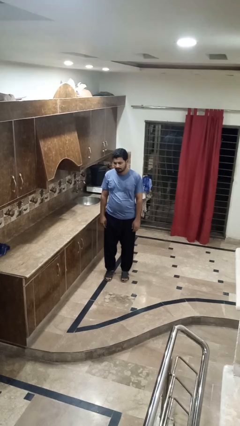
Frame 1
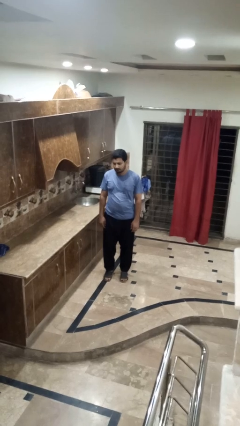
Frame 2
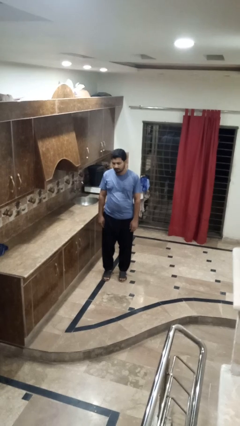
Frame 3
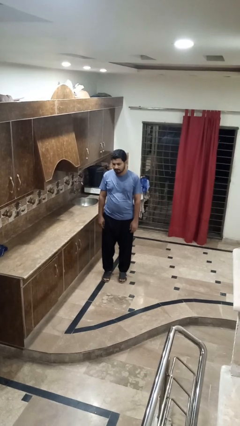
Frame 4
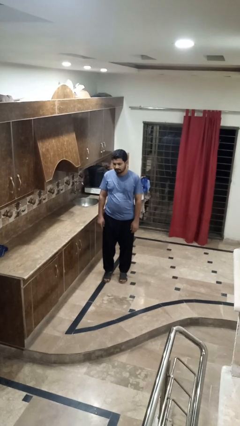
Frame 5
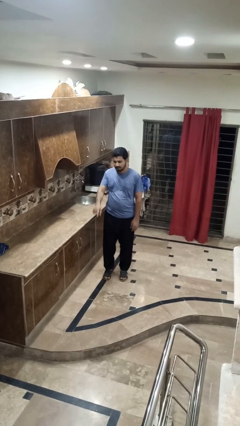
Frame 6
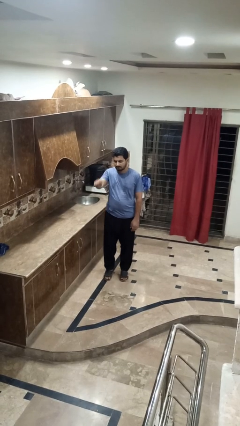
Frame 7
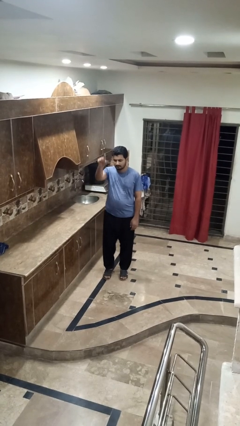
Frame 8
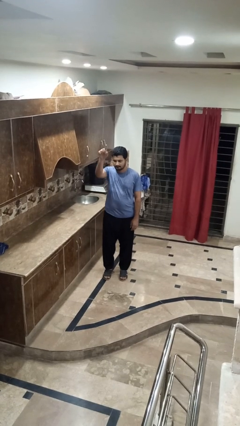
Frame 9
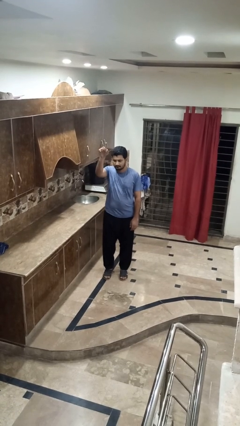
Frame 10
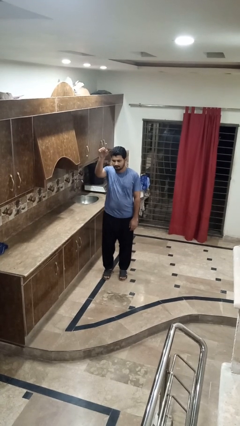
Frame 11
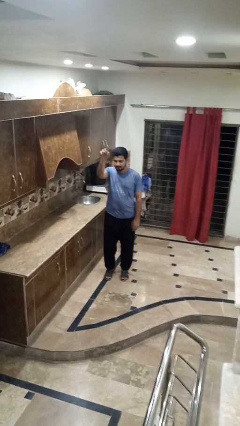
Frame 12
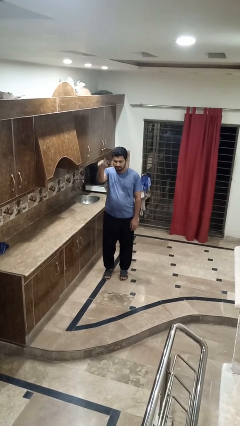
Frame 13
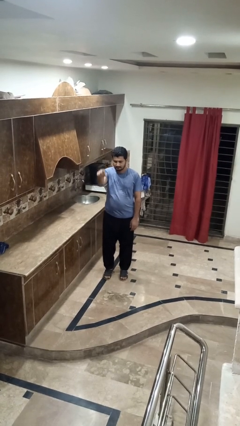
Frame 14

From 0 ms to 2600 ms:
person gestures swipe up

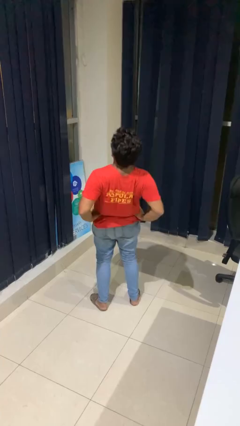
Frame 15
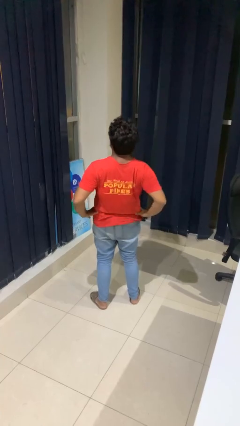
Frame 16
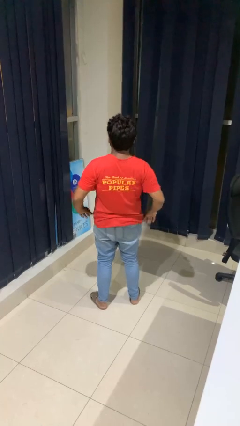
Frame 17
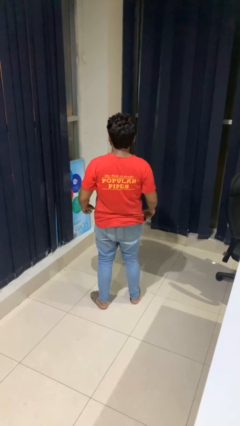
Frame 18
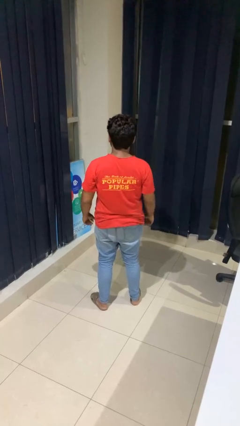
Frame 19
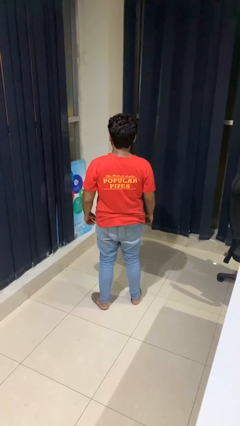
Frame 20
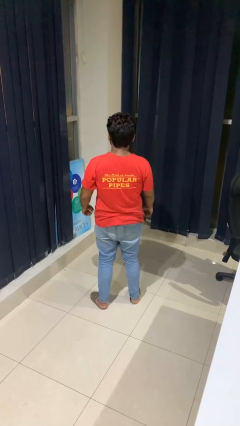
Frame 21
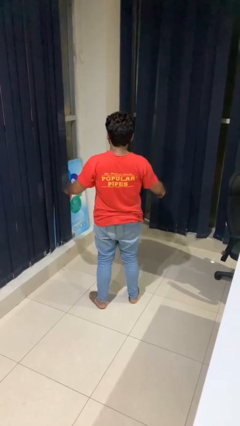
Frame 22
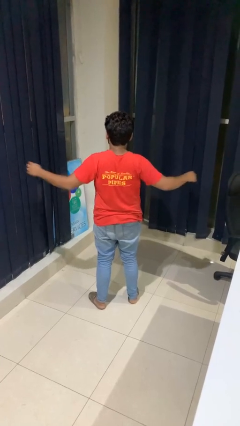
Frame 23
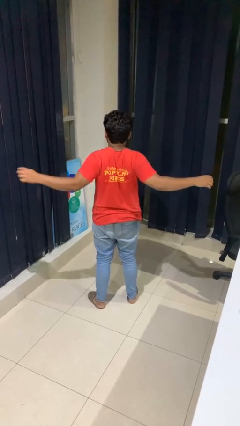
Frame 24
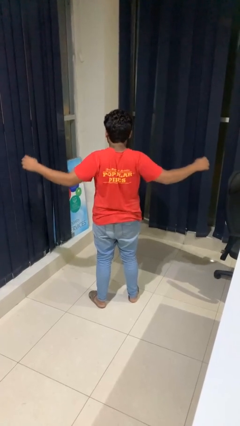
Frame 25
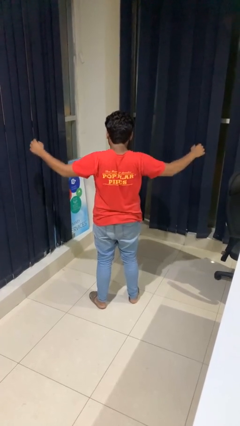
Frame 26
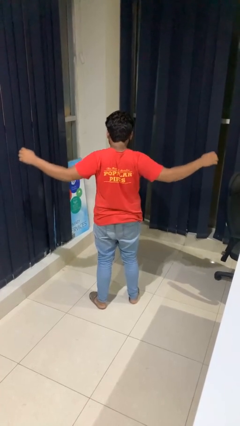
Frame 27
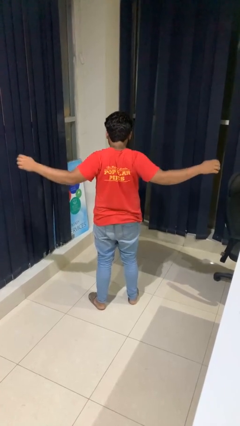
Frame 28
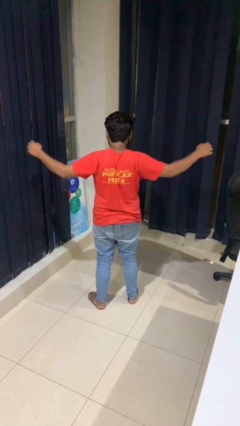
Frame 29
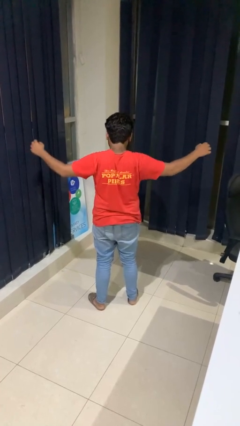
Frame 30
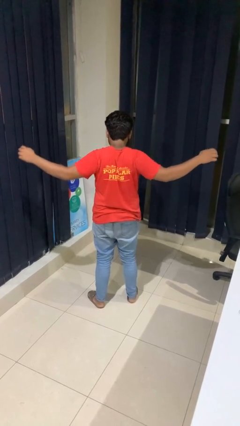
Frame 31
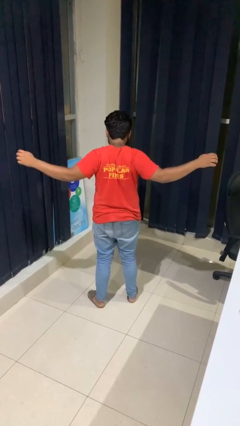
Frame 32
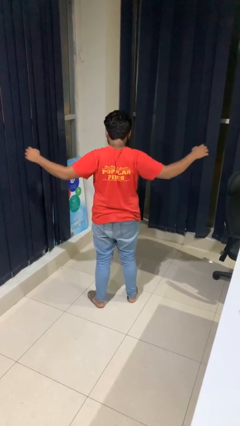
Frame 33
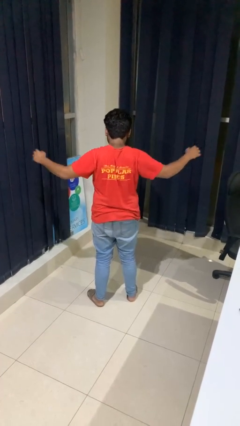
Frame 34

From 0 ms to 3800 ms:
person stretches arms to side

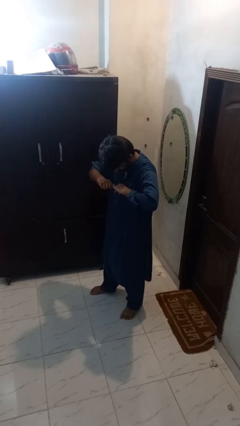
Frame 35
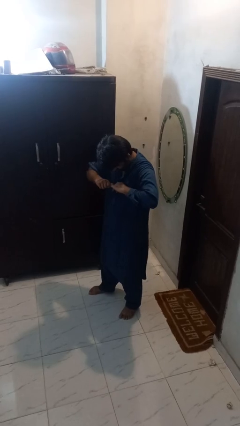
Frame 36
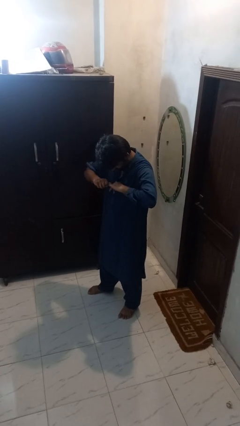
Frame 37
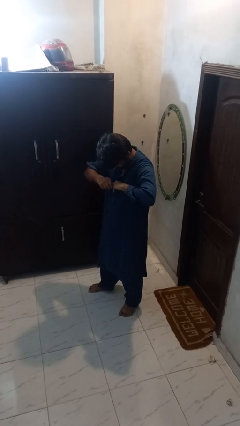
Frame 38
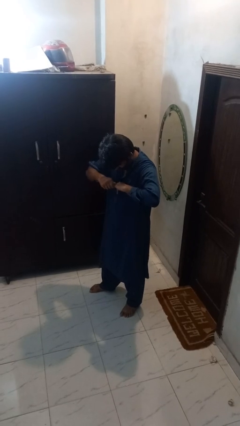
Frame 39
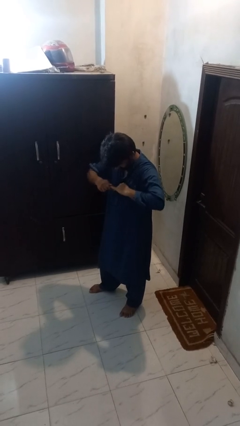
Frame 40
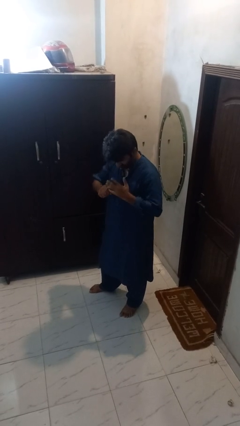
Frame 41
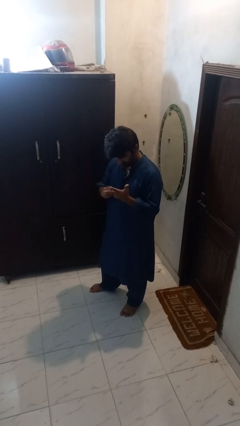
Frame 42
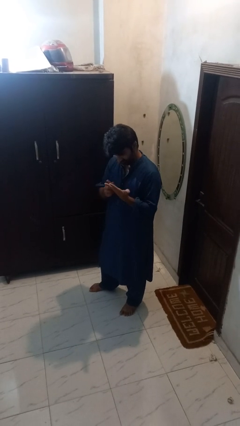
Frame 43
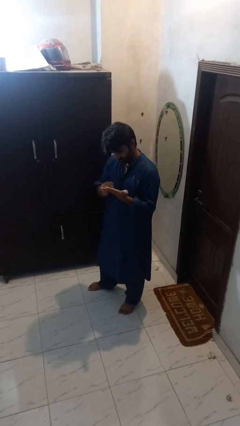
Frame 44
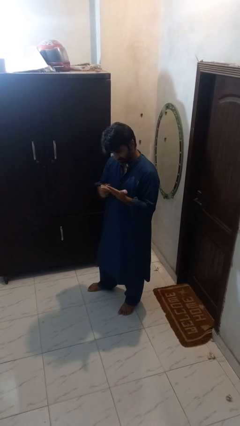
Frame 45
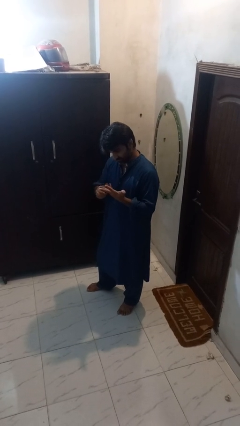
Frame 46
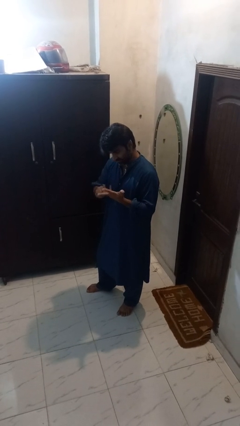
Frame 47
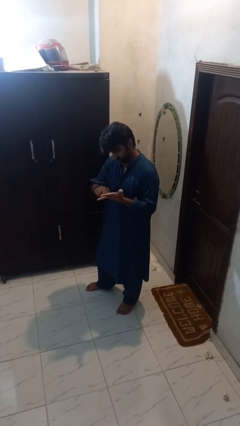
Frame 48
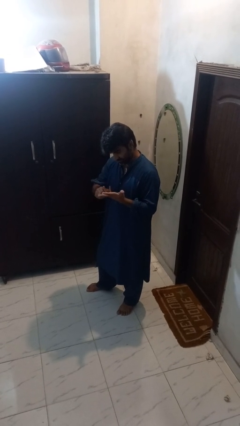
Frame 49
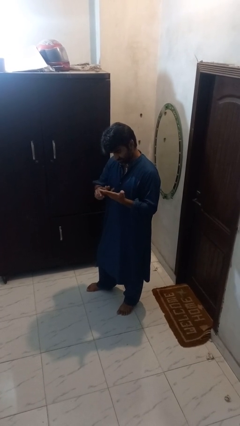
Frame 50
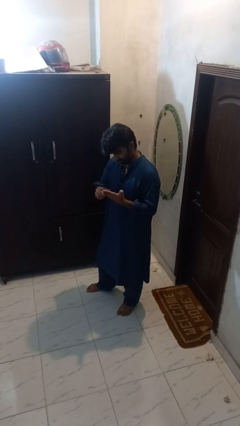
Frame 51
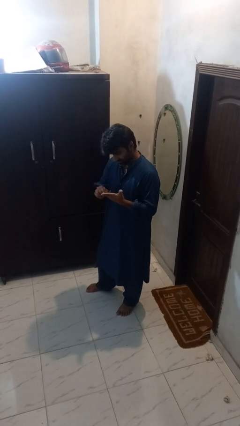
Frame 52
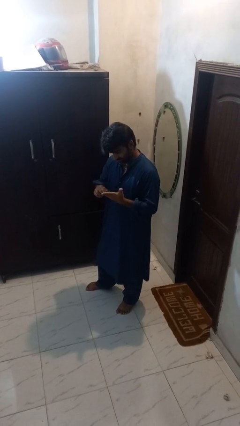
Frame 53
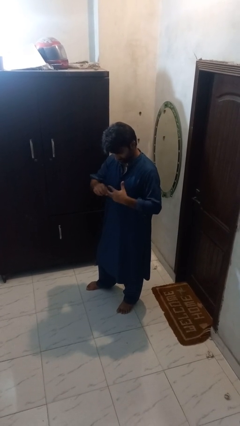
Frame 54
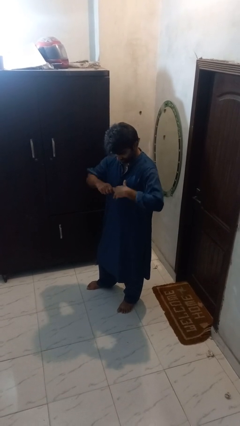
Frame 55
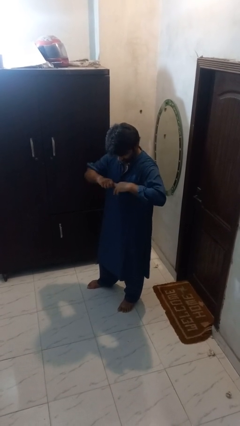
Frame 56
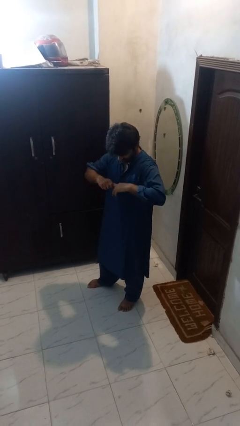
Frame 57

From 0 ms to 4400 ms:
person cracks knuckles

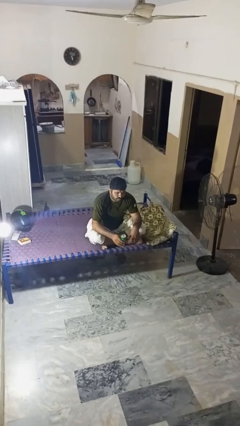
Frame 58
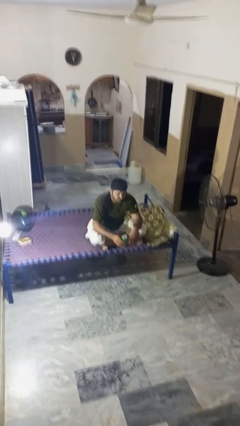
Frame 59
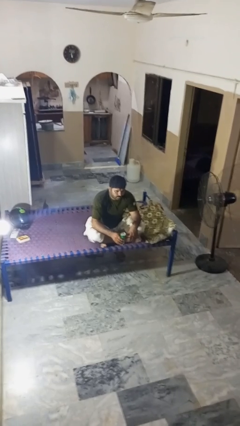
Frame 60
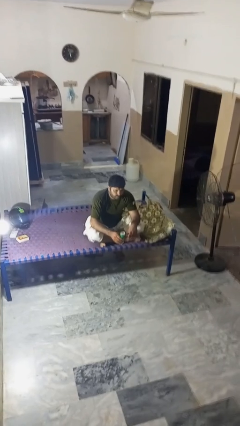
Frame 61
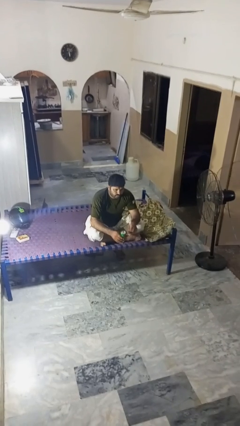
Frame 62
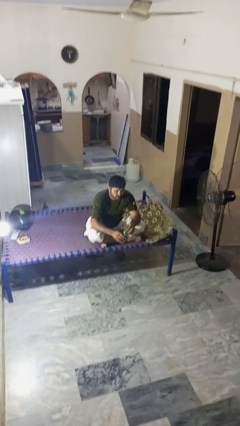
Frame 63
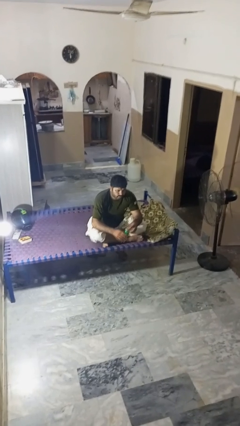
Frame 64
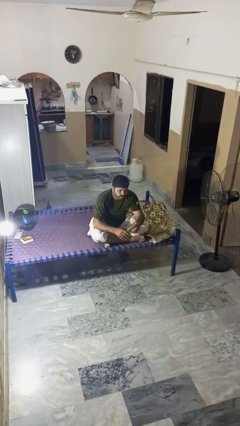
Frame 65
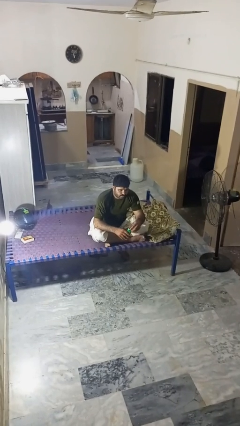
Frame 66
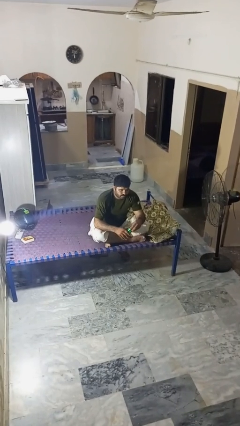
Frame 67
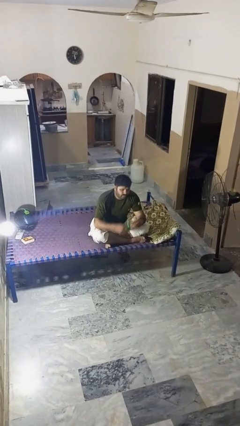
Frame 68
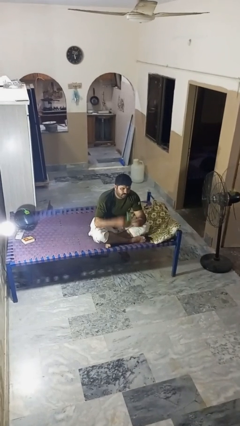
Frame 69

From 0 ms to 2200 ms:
person opens beverage can

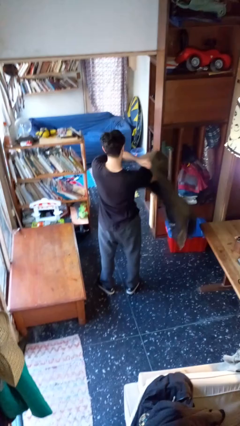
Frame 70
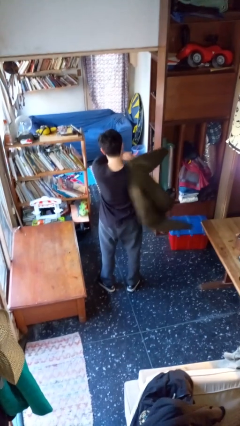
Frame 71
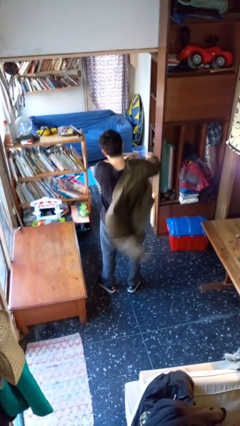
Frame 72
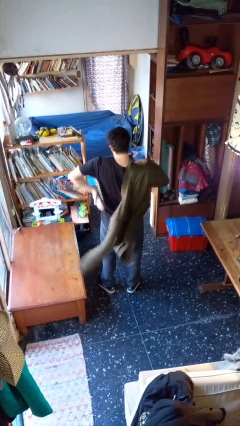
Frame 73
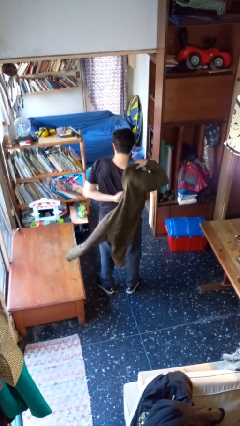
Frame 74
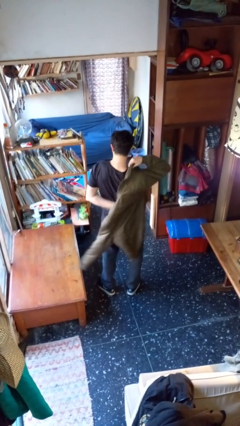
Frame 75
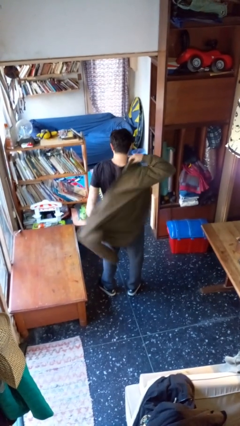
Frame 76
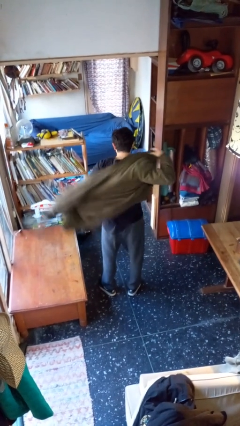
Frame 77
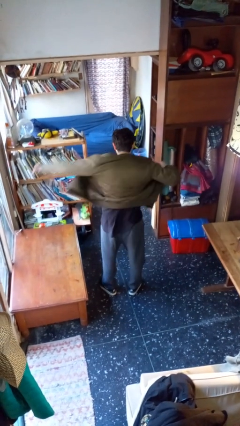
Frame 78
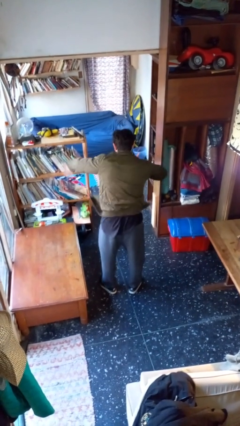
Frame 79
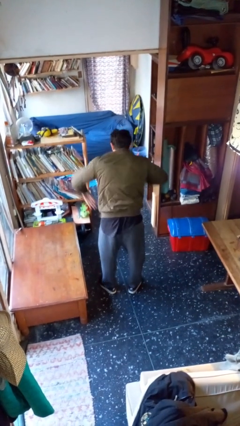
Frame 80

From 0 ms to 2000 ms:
person puts on jacket

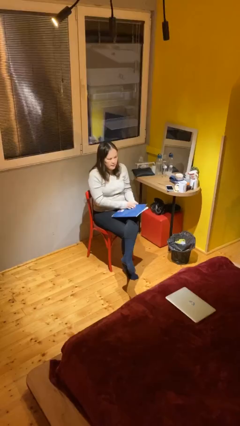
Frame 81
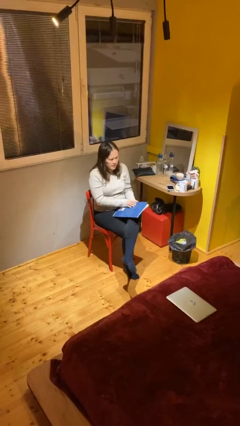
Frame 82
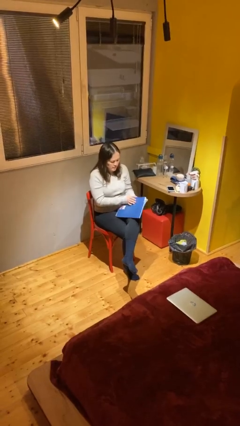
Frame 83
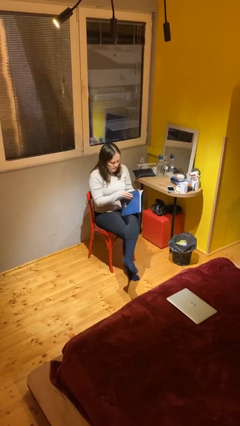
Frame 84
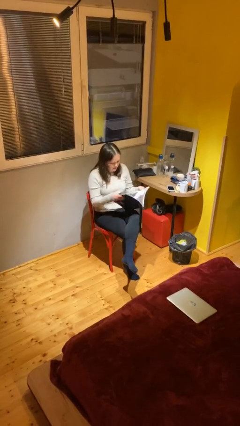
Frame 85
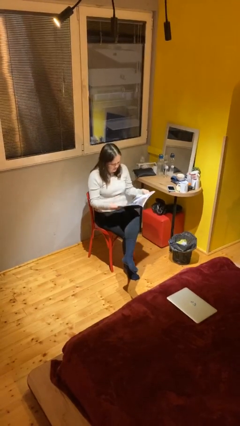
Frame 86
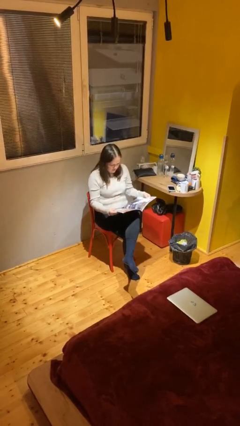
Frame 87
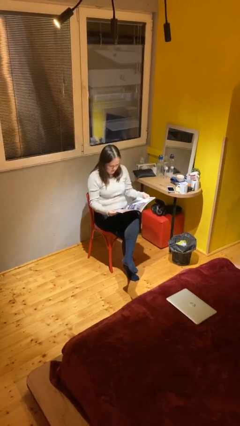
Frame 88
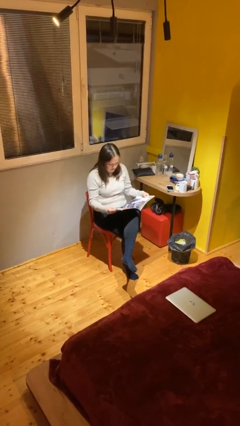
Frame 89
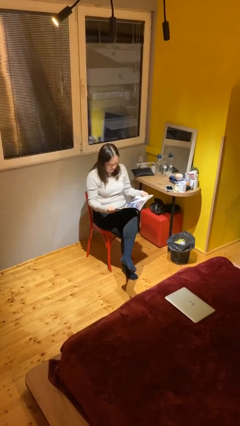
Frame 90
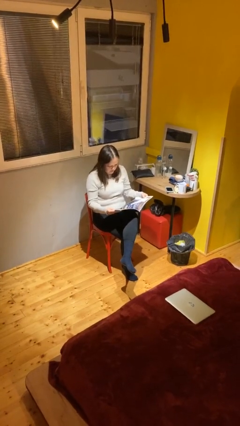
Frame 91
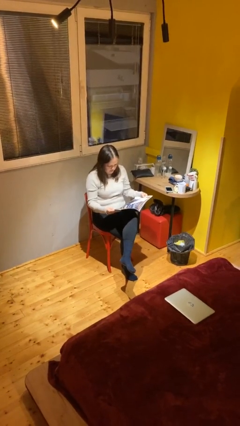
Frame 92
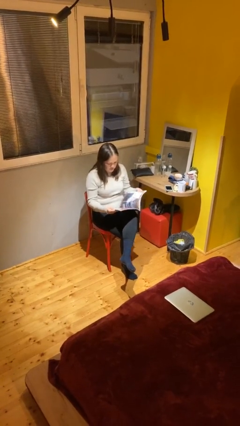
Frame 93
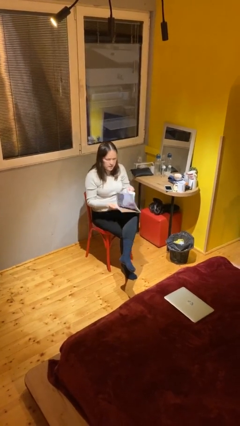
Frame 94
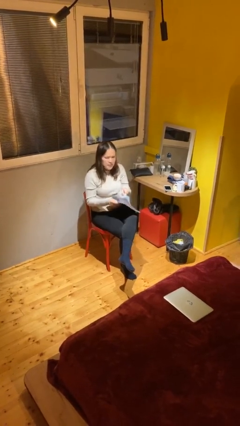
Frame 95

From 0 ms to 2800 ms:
person reads document
